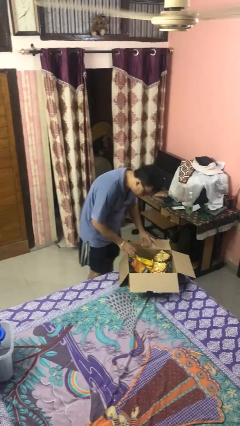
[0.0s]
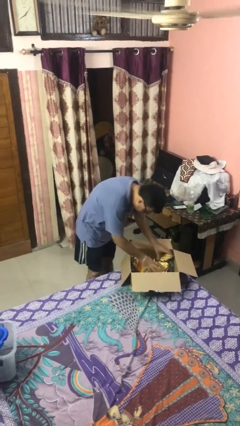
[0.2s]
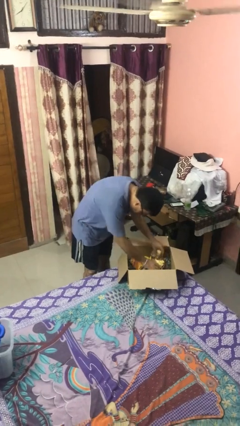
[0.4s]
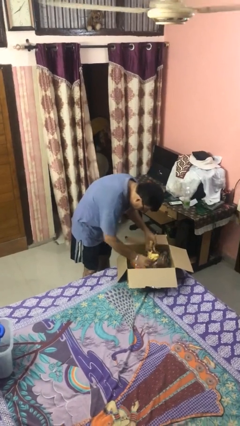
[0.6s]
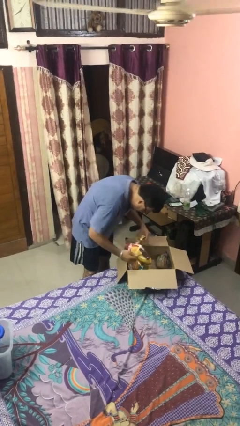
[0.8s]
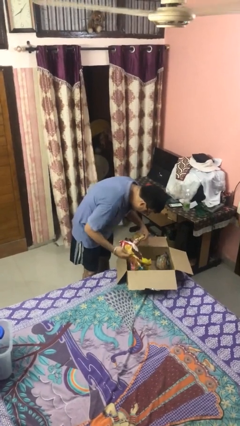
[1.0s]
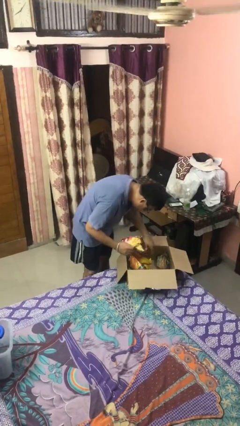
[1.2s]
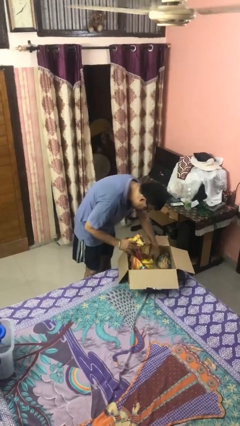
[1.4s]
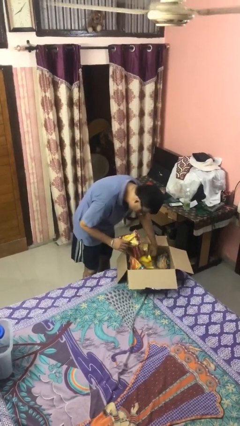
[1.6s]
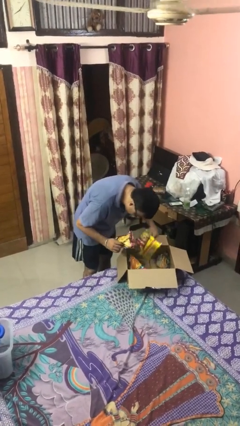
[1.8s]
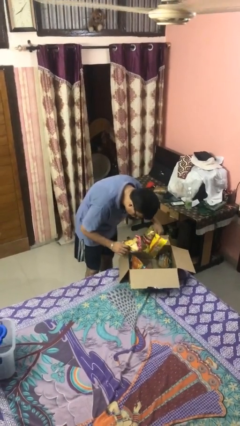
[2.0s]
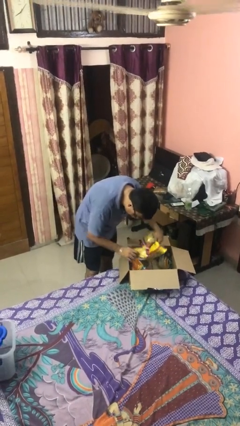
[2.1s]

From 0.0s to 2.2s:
person searches in box

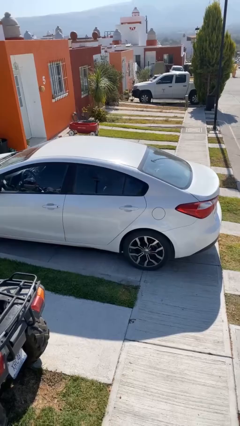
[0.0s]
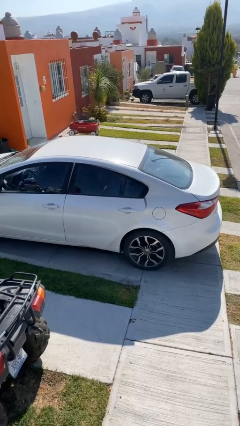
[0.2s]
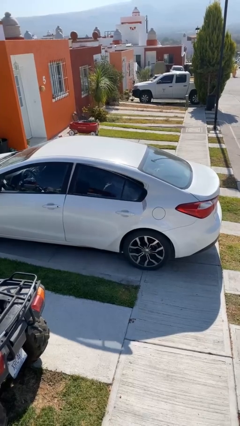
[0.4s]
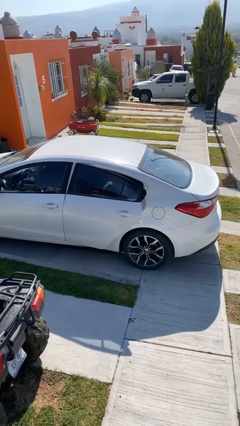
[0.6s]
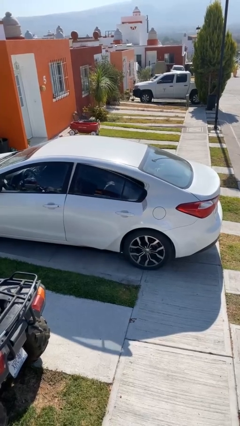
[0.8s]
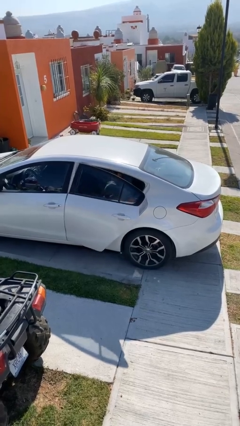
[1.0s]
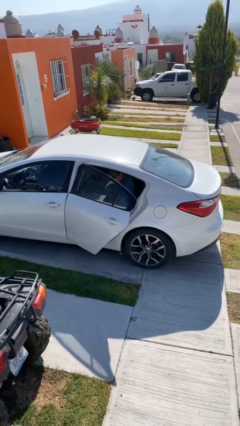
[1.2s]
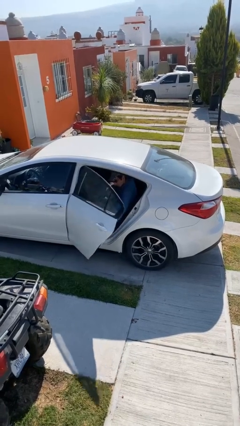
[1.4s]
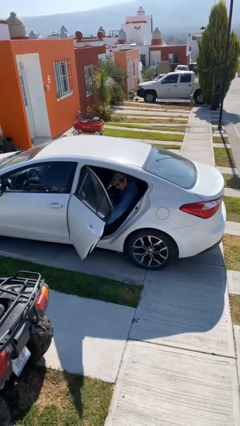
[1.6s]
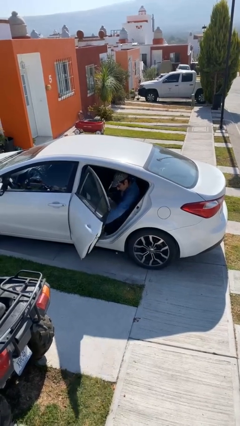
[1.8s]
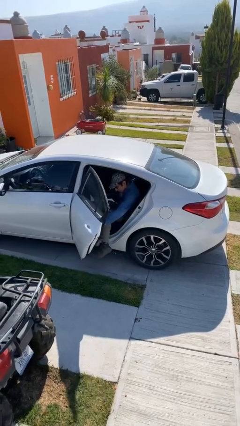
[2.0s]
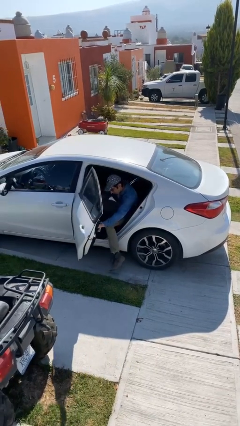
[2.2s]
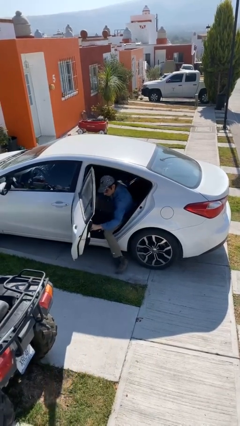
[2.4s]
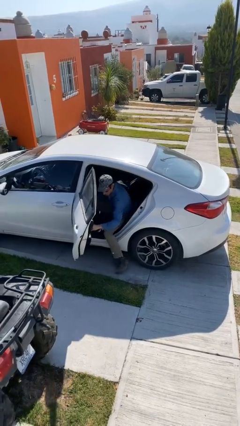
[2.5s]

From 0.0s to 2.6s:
person opens car door

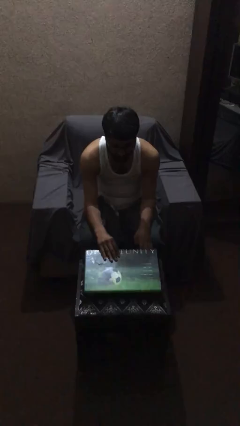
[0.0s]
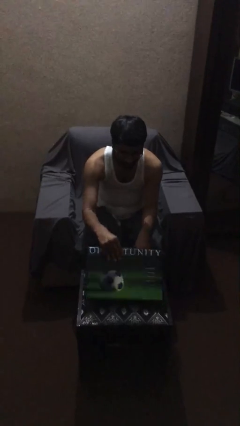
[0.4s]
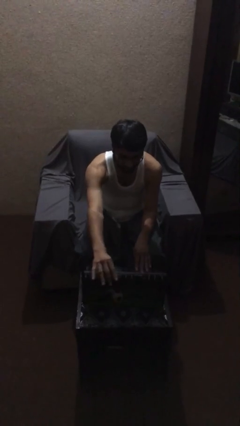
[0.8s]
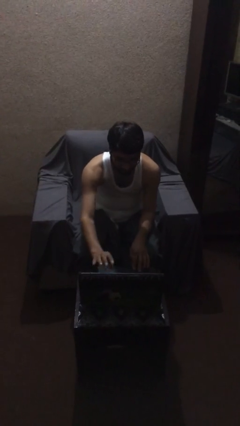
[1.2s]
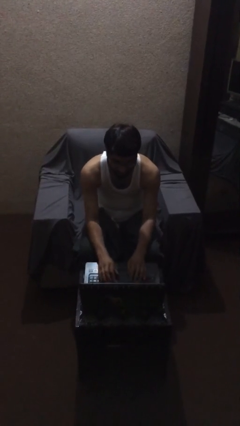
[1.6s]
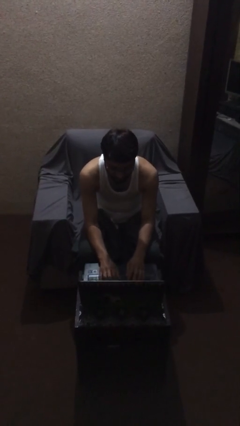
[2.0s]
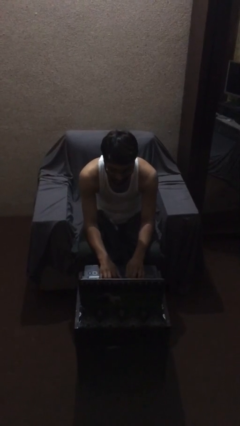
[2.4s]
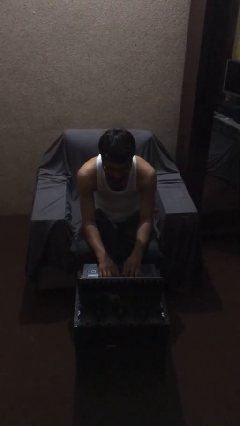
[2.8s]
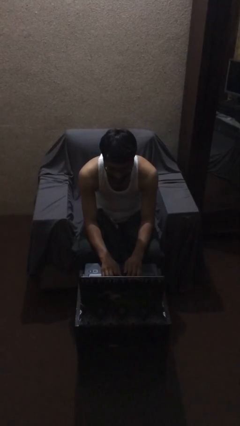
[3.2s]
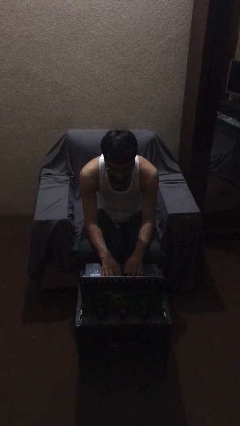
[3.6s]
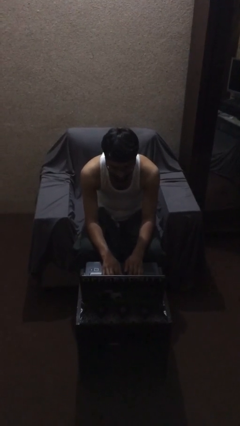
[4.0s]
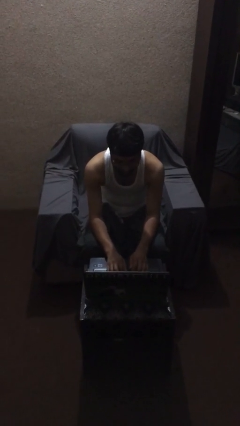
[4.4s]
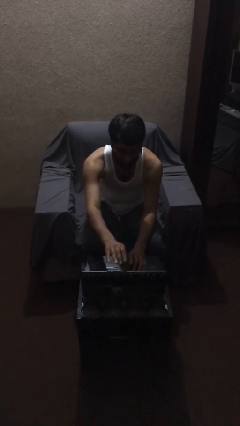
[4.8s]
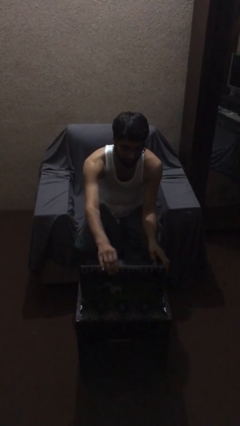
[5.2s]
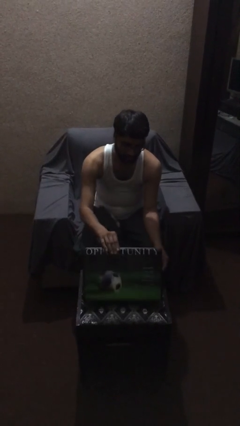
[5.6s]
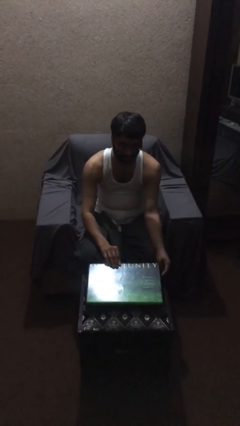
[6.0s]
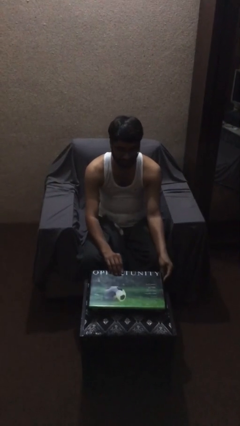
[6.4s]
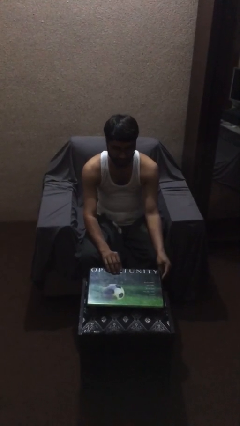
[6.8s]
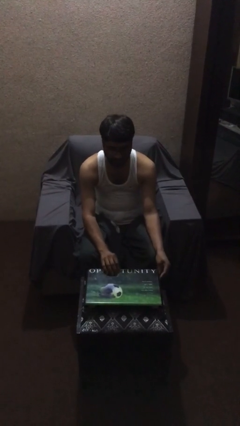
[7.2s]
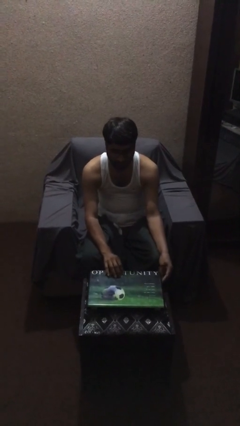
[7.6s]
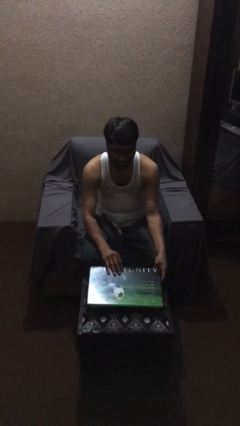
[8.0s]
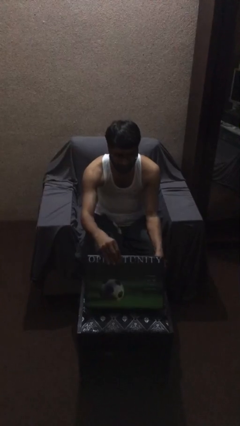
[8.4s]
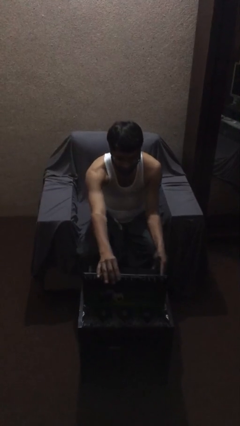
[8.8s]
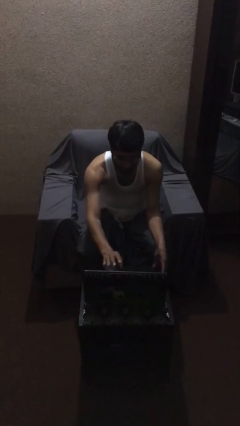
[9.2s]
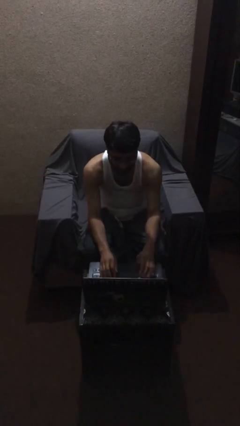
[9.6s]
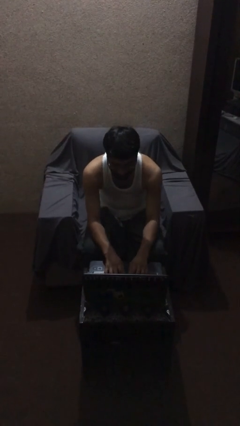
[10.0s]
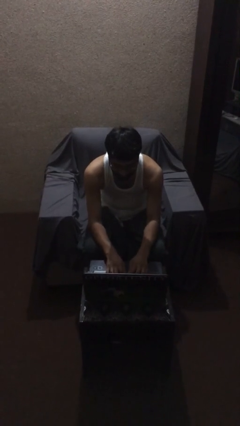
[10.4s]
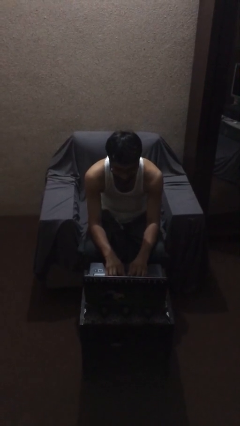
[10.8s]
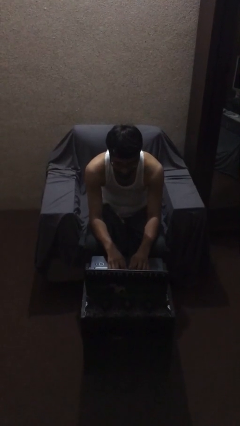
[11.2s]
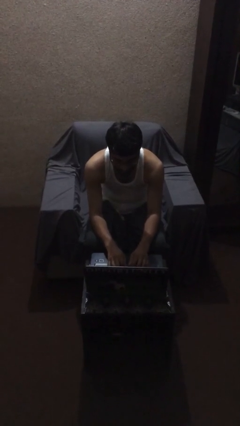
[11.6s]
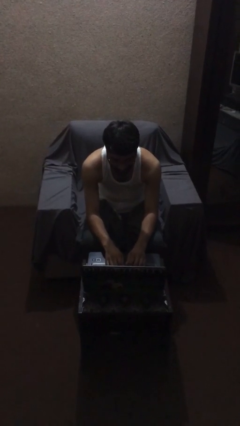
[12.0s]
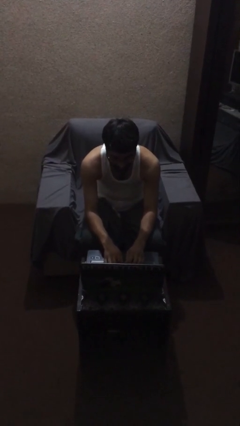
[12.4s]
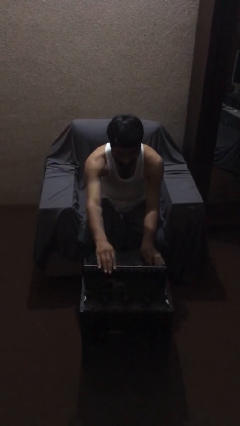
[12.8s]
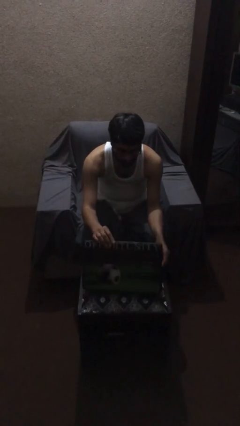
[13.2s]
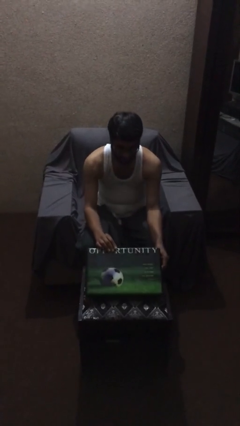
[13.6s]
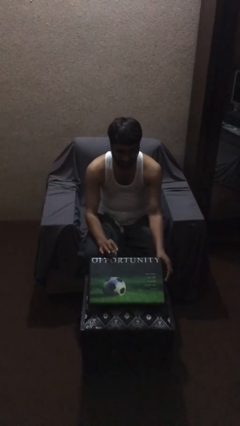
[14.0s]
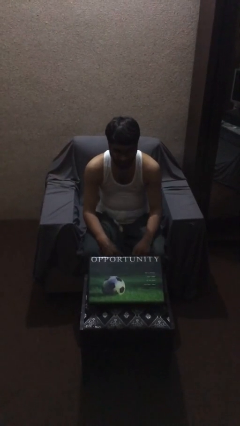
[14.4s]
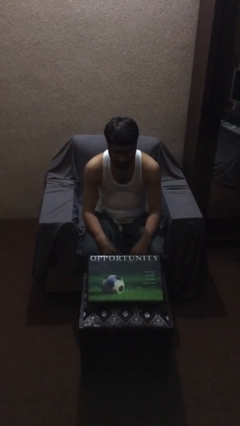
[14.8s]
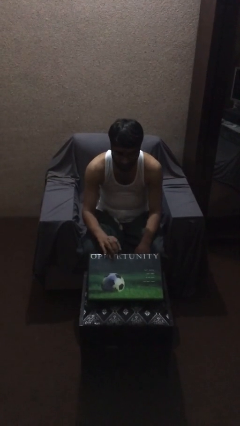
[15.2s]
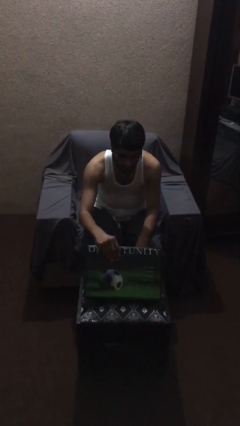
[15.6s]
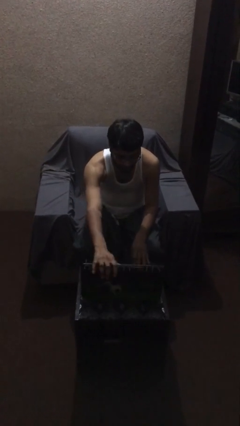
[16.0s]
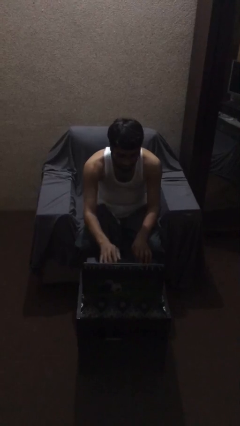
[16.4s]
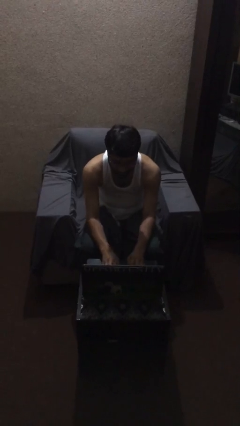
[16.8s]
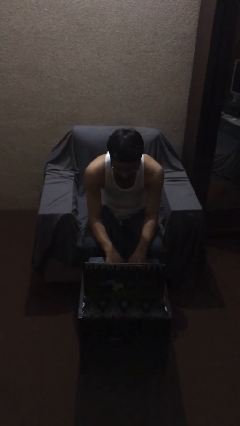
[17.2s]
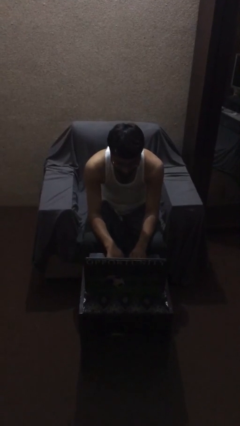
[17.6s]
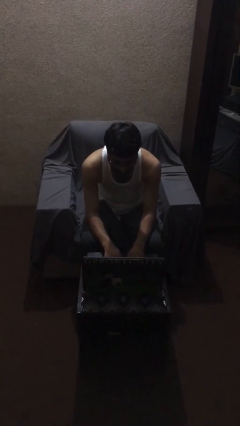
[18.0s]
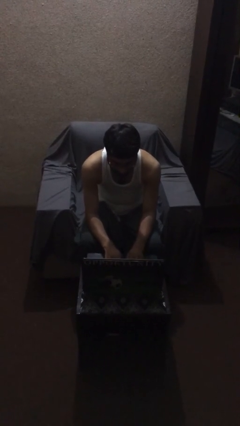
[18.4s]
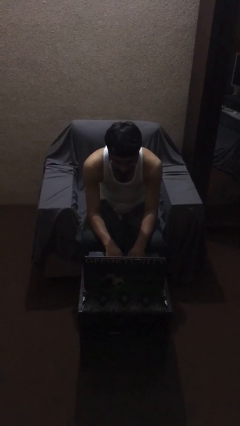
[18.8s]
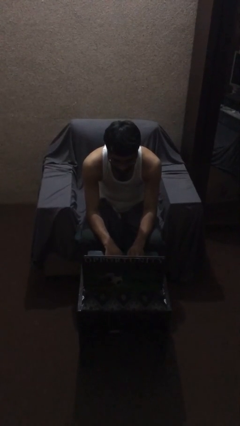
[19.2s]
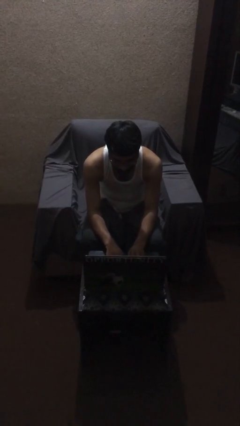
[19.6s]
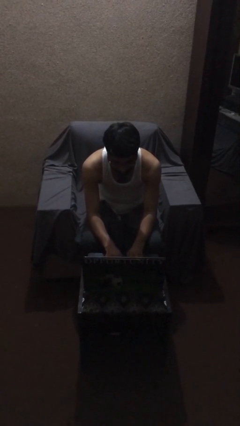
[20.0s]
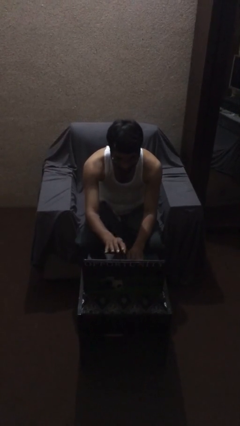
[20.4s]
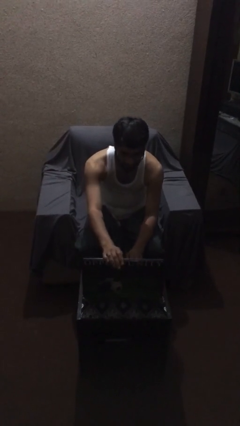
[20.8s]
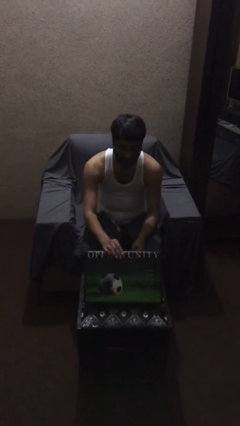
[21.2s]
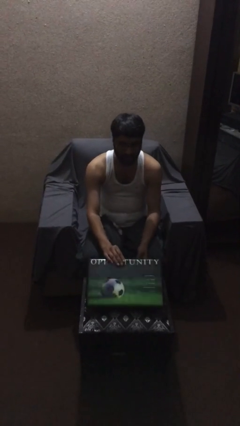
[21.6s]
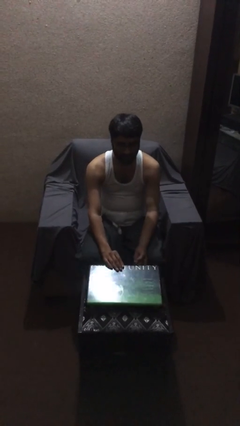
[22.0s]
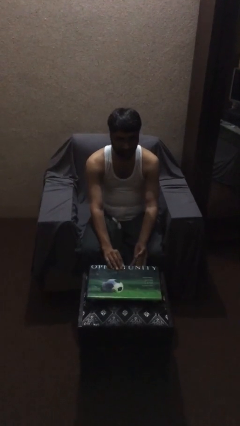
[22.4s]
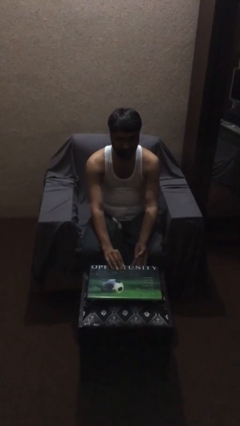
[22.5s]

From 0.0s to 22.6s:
person interacts with laptop

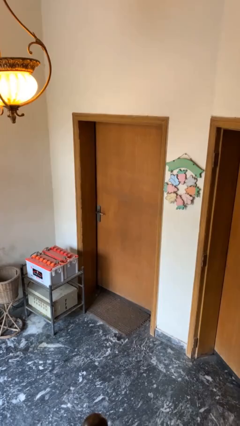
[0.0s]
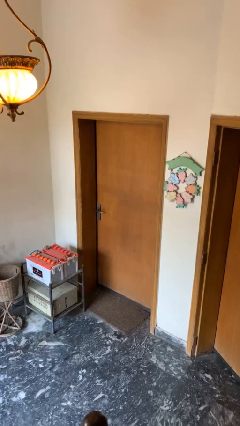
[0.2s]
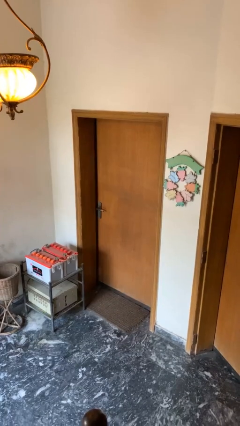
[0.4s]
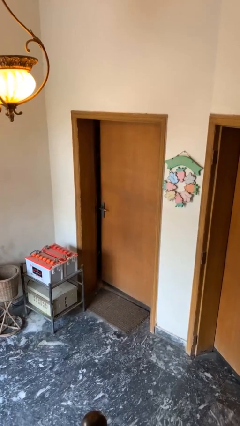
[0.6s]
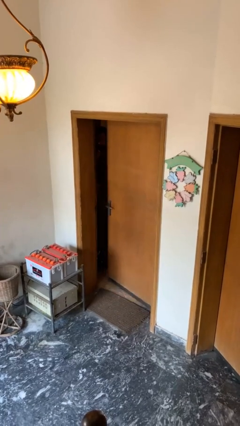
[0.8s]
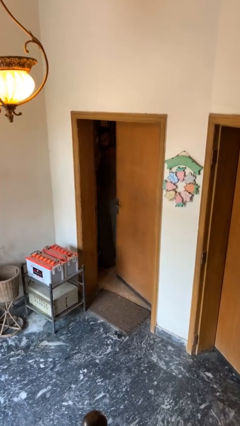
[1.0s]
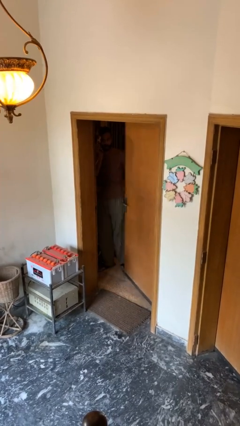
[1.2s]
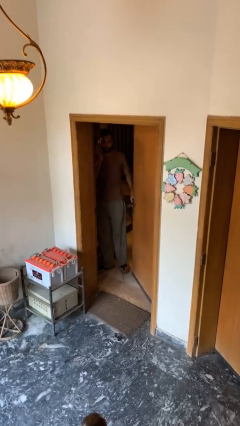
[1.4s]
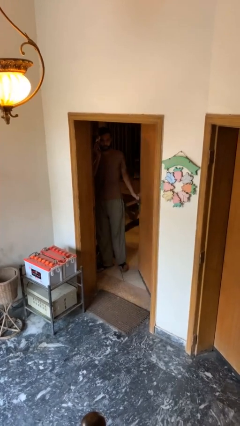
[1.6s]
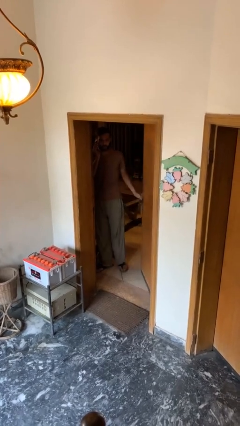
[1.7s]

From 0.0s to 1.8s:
person opens facility door
